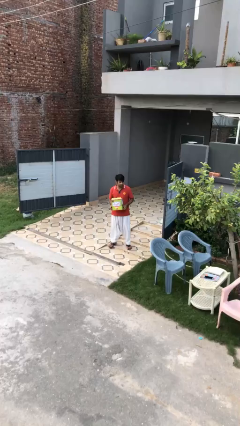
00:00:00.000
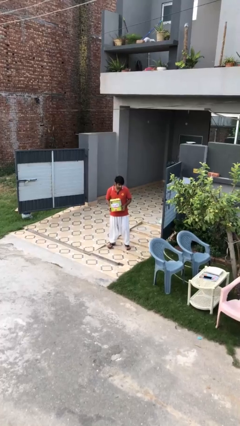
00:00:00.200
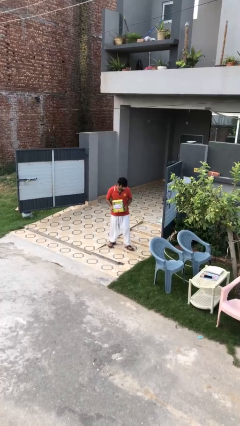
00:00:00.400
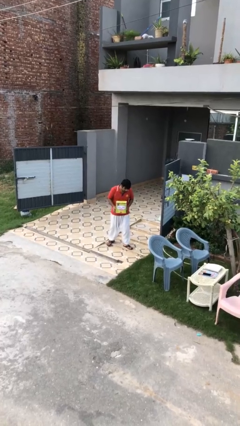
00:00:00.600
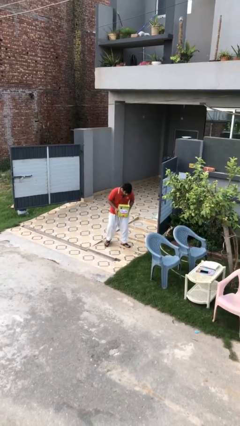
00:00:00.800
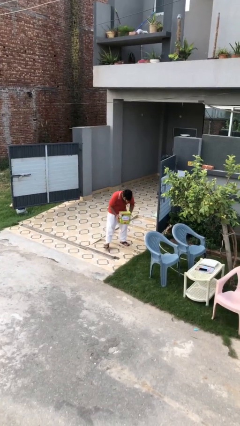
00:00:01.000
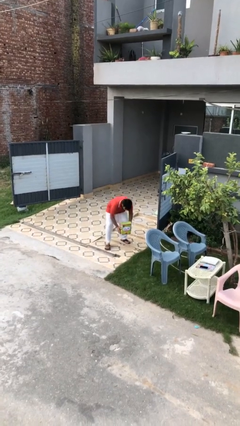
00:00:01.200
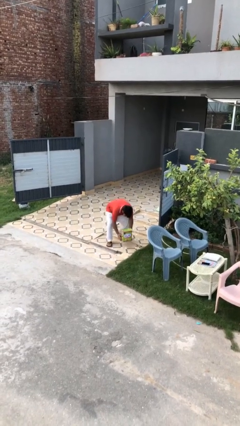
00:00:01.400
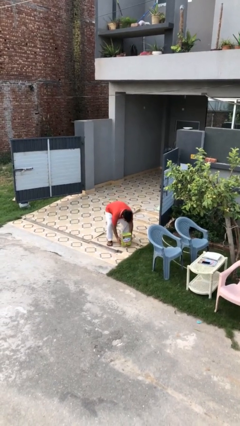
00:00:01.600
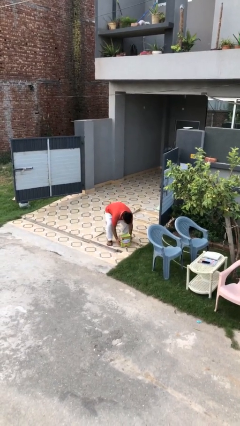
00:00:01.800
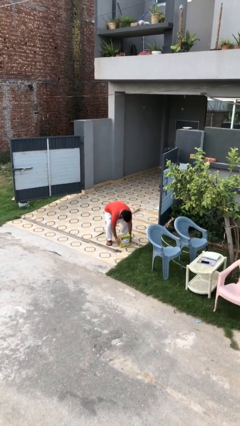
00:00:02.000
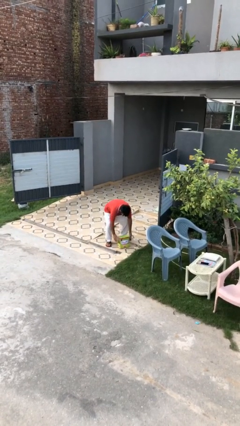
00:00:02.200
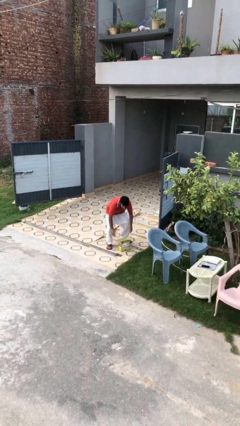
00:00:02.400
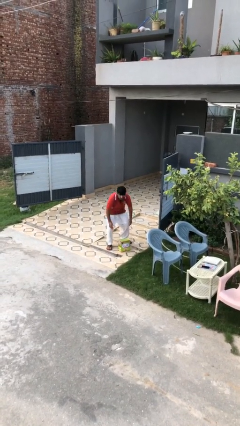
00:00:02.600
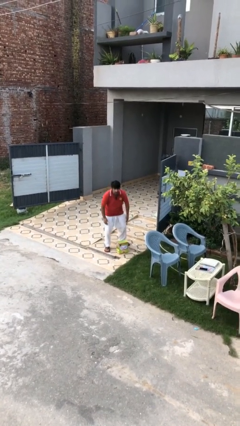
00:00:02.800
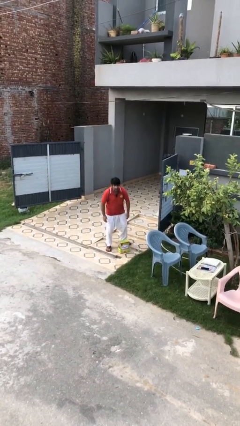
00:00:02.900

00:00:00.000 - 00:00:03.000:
person puts down object on floor

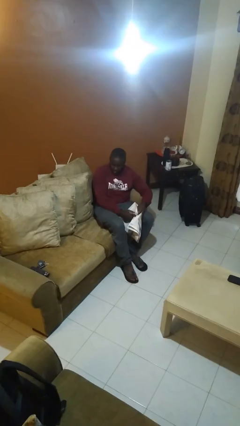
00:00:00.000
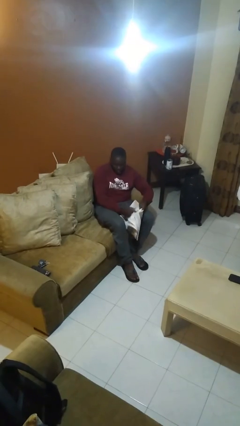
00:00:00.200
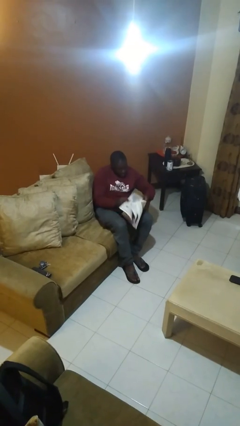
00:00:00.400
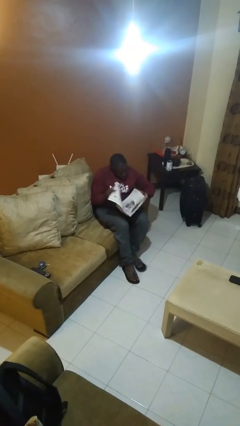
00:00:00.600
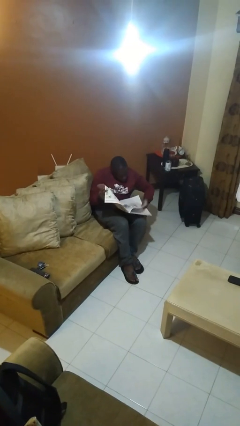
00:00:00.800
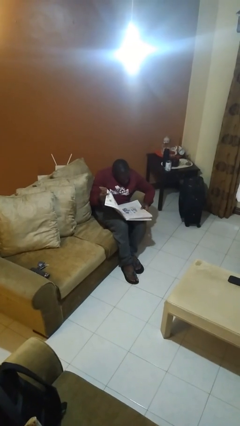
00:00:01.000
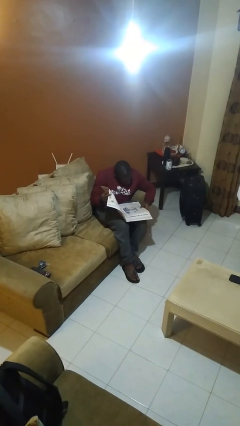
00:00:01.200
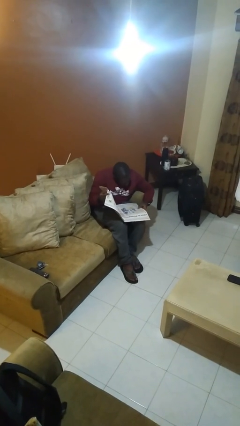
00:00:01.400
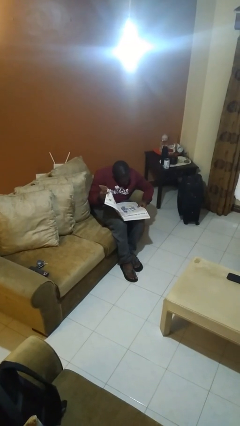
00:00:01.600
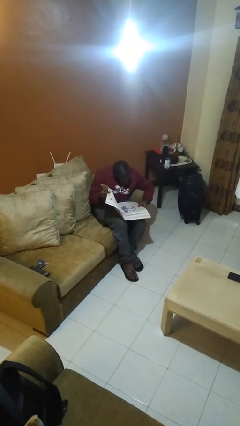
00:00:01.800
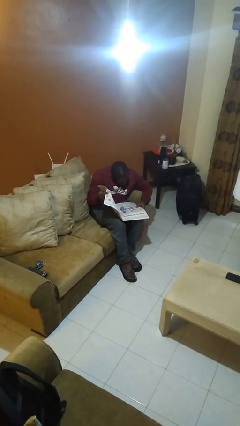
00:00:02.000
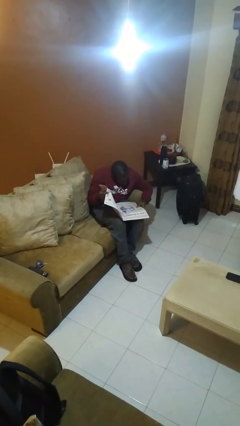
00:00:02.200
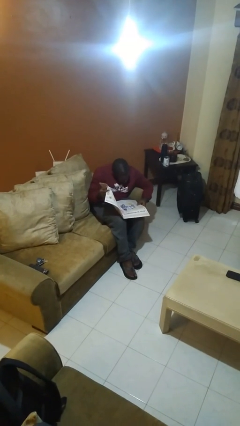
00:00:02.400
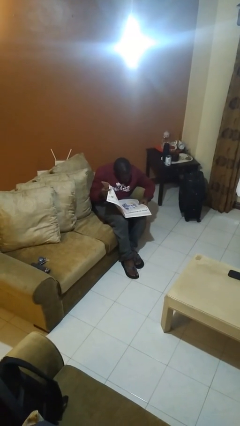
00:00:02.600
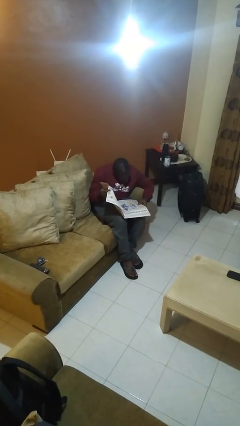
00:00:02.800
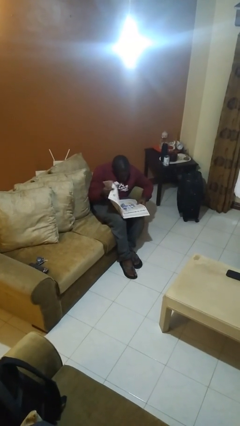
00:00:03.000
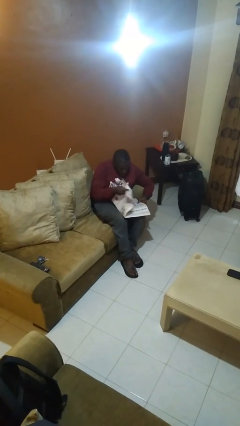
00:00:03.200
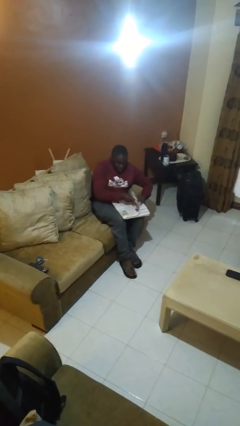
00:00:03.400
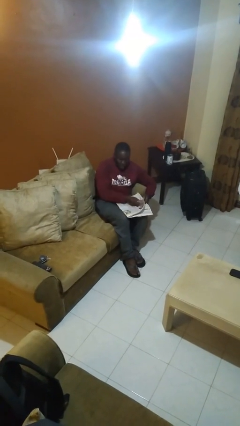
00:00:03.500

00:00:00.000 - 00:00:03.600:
person reads newspaper

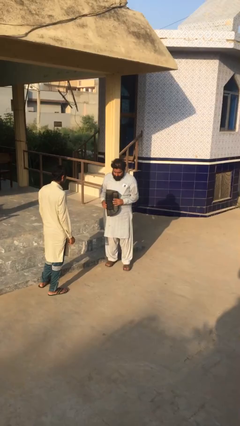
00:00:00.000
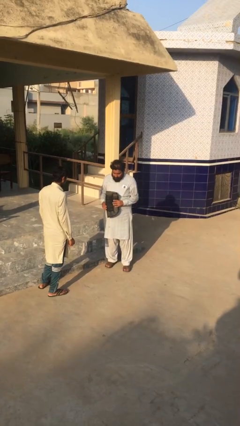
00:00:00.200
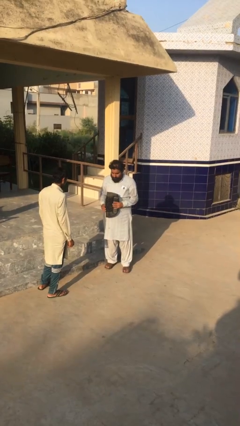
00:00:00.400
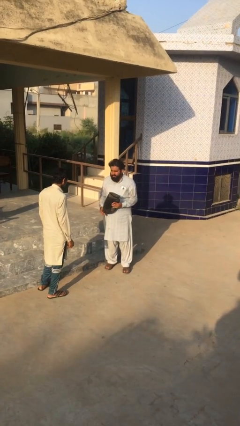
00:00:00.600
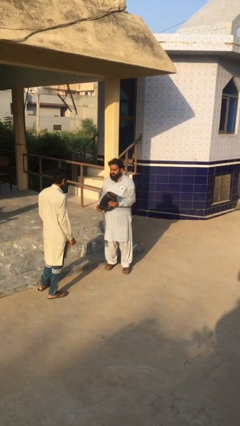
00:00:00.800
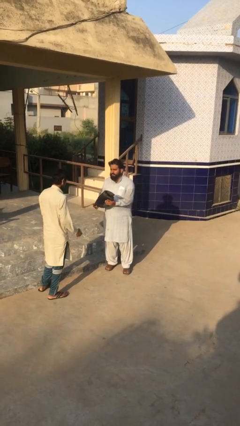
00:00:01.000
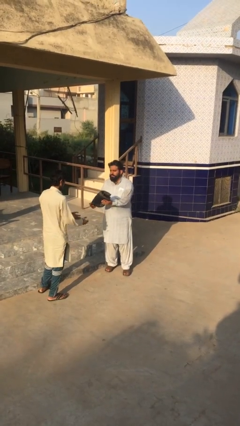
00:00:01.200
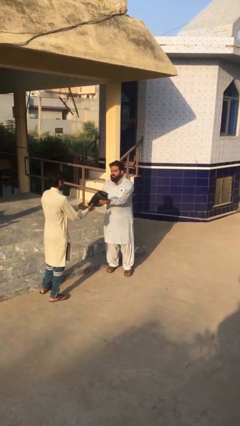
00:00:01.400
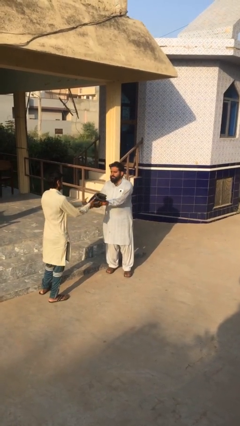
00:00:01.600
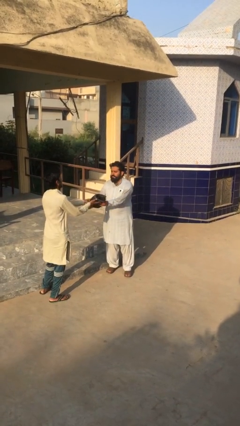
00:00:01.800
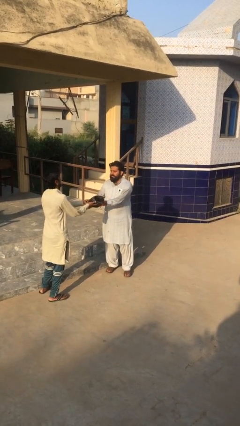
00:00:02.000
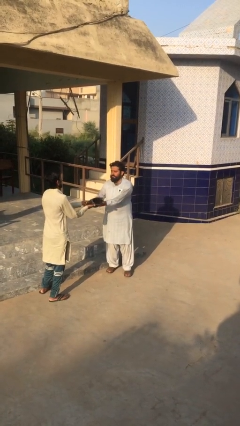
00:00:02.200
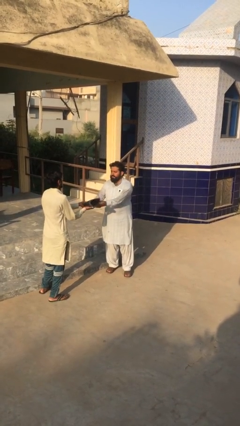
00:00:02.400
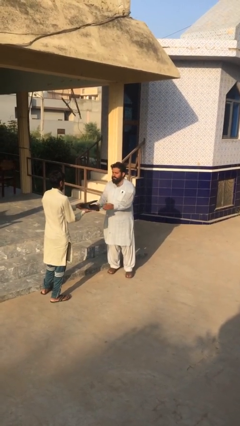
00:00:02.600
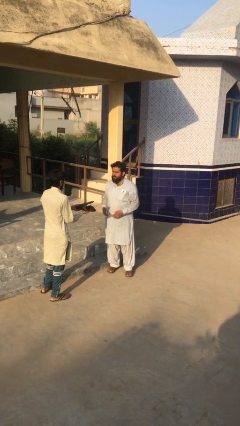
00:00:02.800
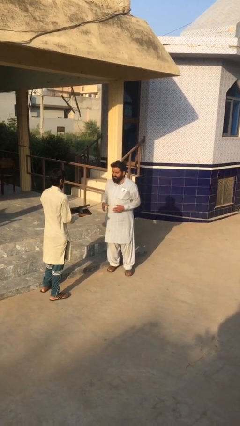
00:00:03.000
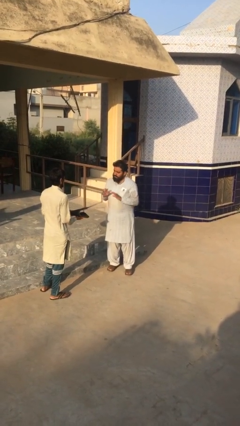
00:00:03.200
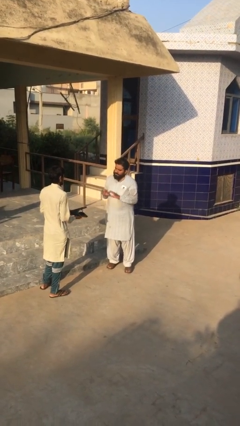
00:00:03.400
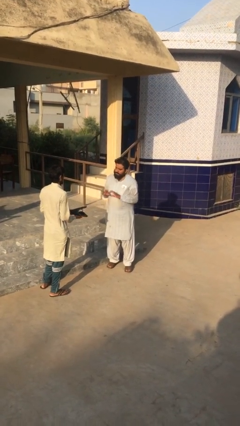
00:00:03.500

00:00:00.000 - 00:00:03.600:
person transfers object to person

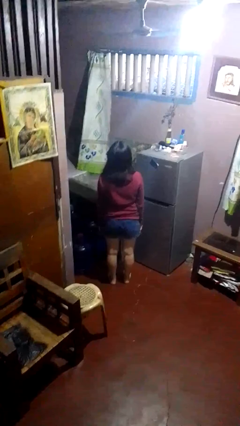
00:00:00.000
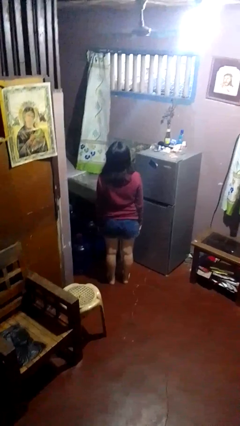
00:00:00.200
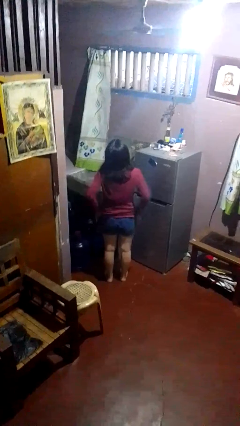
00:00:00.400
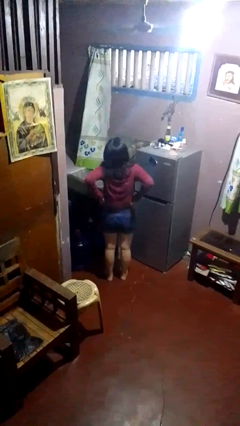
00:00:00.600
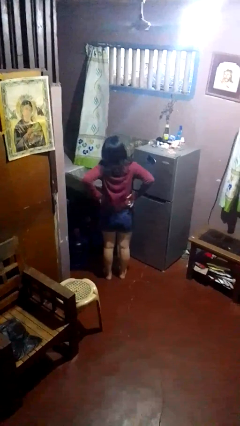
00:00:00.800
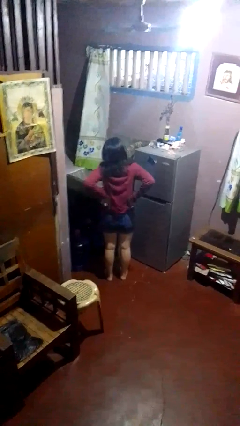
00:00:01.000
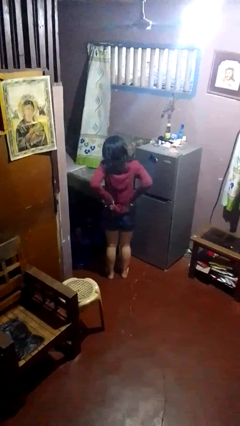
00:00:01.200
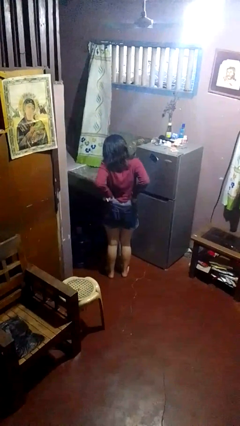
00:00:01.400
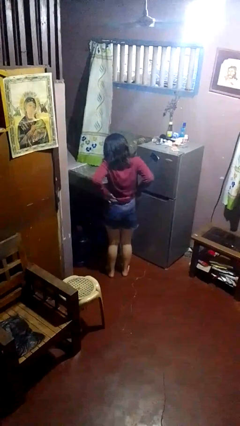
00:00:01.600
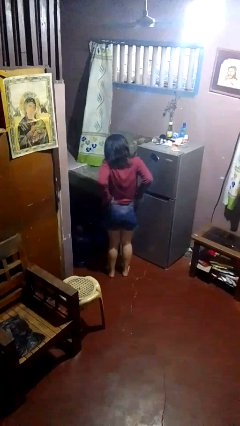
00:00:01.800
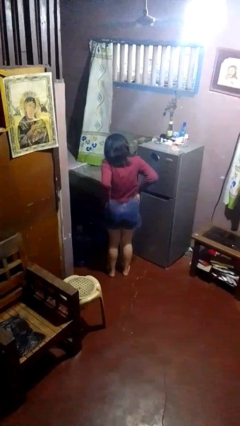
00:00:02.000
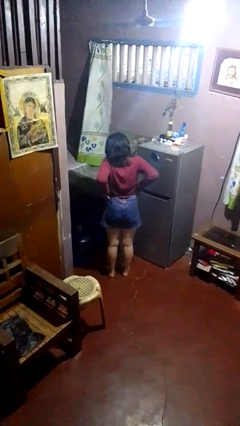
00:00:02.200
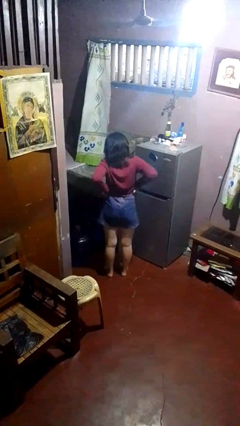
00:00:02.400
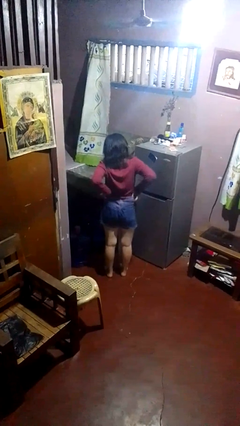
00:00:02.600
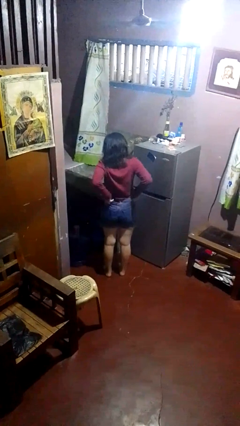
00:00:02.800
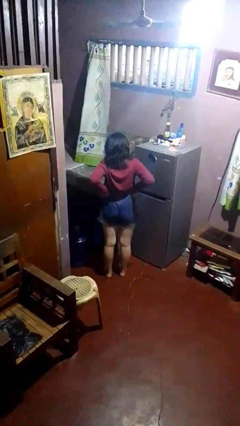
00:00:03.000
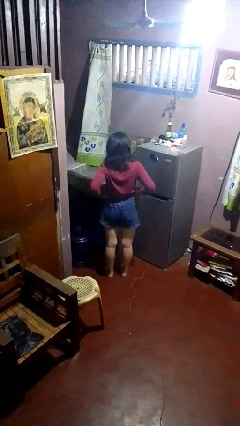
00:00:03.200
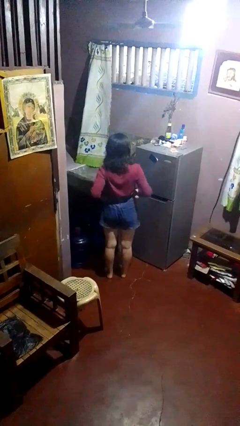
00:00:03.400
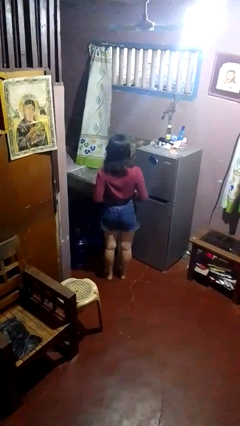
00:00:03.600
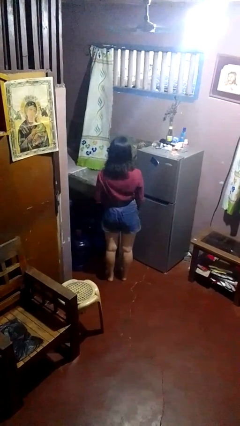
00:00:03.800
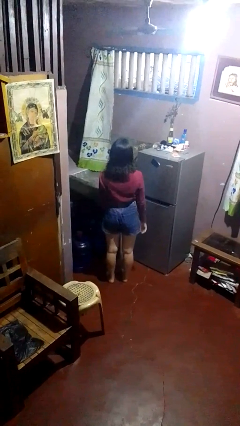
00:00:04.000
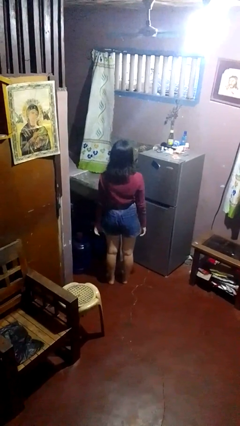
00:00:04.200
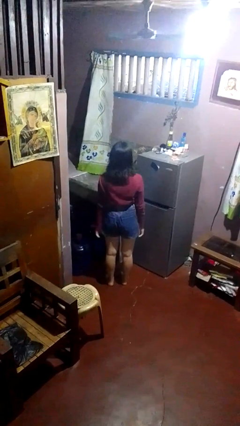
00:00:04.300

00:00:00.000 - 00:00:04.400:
person tucks in shirt

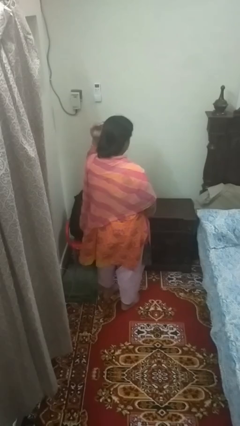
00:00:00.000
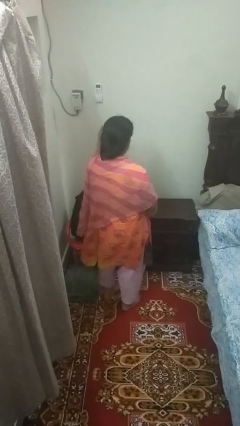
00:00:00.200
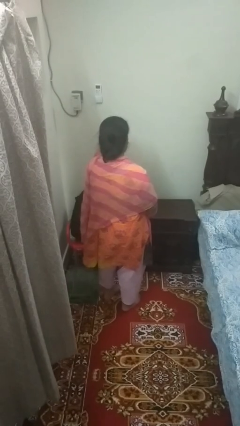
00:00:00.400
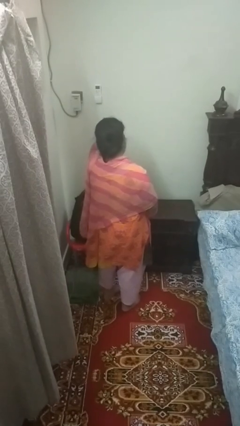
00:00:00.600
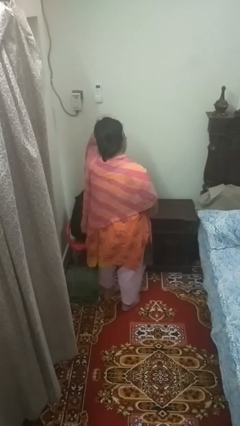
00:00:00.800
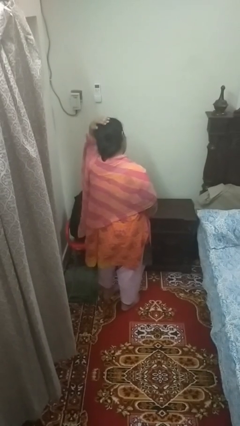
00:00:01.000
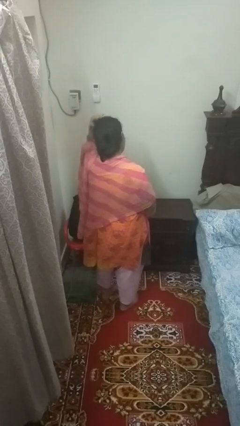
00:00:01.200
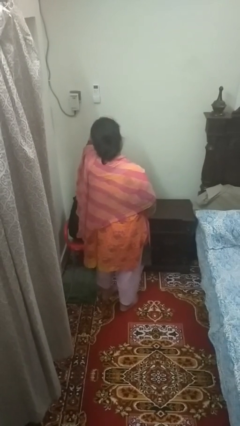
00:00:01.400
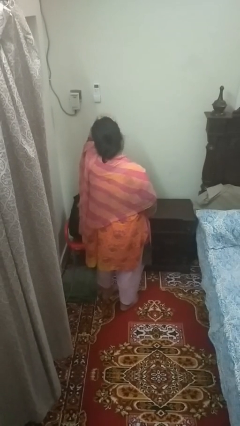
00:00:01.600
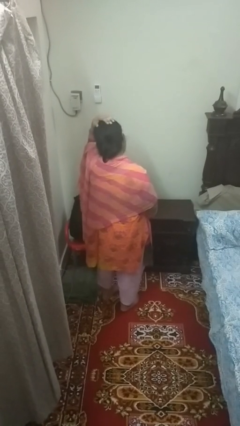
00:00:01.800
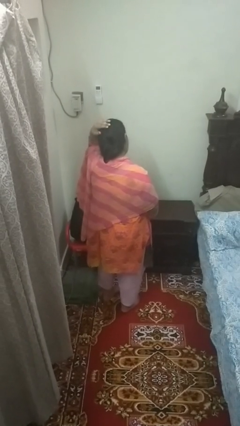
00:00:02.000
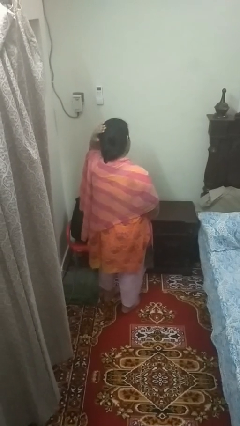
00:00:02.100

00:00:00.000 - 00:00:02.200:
person strokes hair

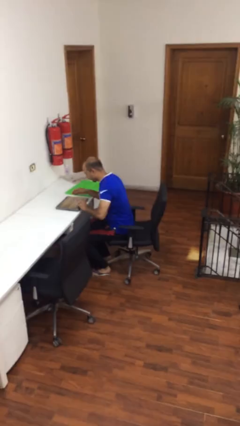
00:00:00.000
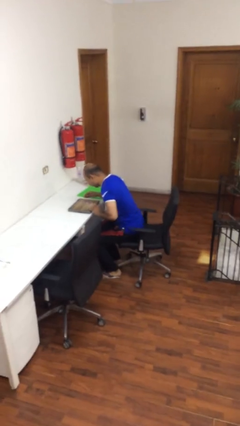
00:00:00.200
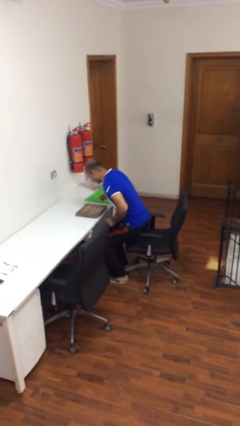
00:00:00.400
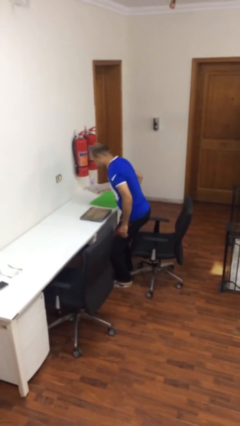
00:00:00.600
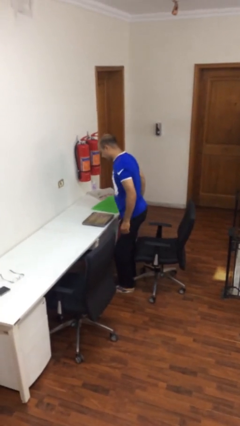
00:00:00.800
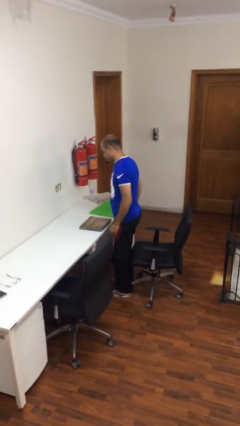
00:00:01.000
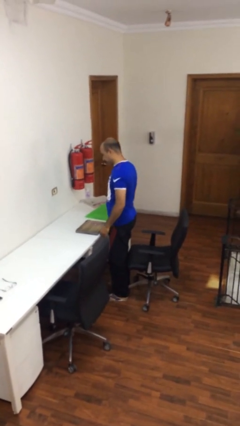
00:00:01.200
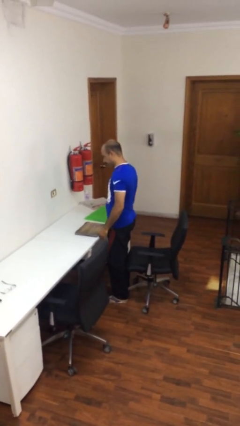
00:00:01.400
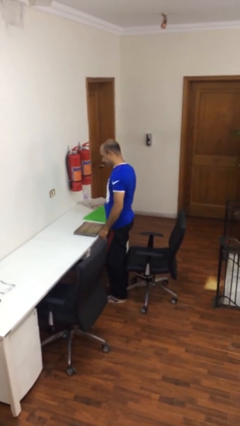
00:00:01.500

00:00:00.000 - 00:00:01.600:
person stands up
